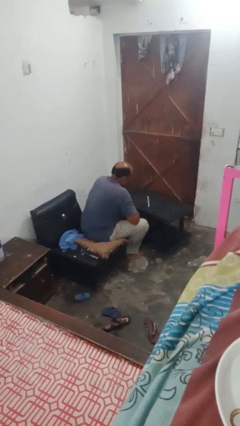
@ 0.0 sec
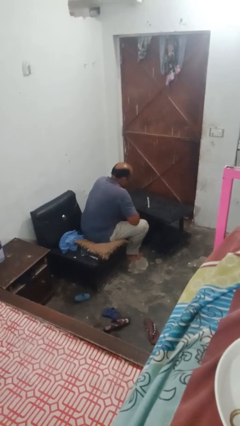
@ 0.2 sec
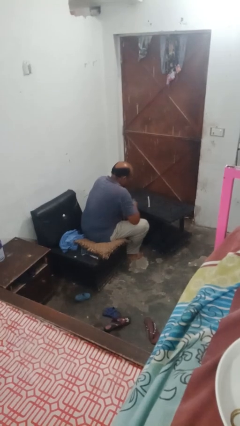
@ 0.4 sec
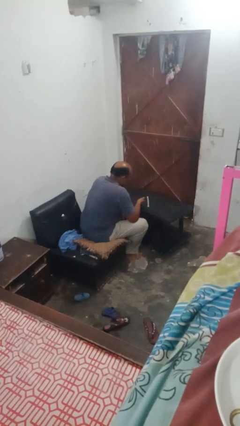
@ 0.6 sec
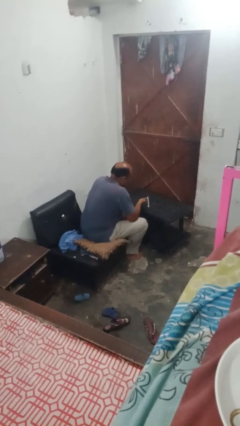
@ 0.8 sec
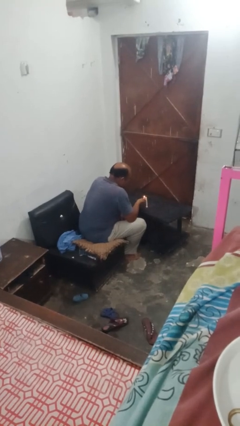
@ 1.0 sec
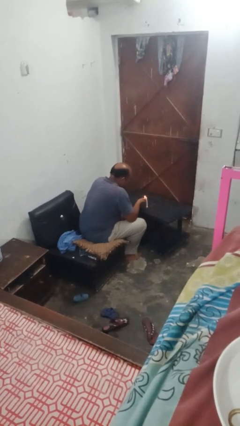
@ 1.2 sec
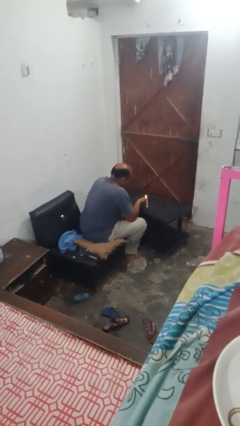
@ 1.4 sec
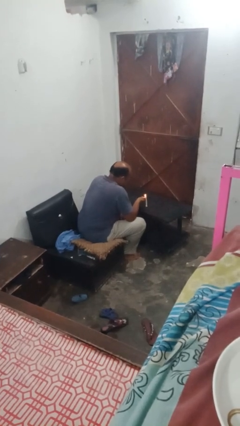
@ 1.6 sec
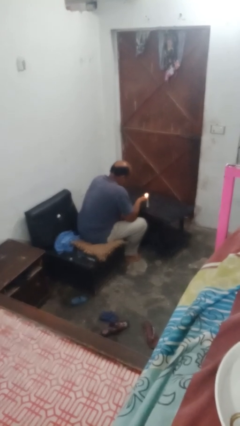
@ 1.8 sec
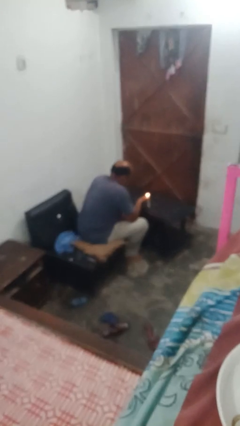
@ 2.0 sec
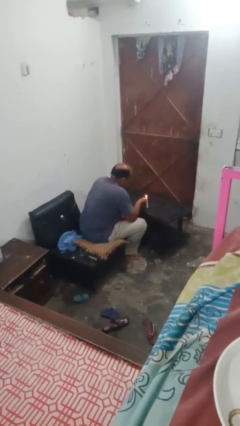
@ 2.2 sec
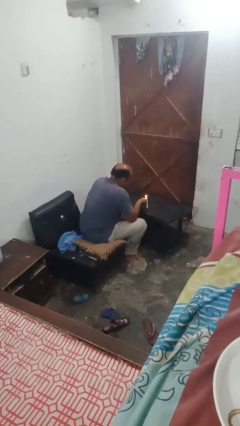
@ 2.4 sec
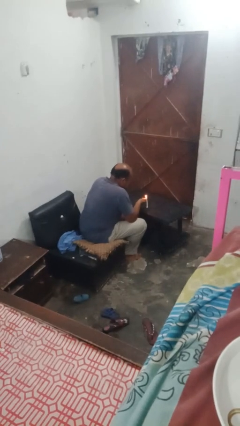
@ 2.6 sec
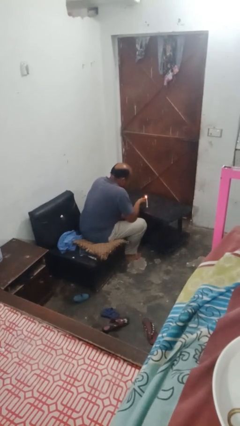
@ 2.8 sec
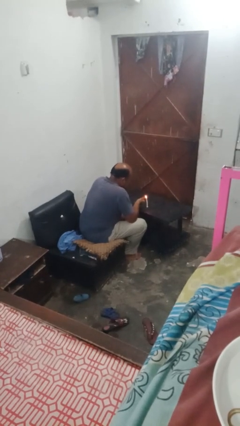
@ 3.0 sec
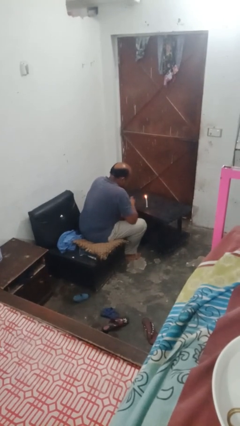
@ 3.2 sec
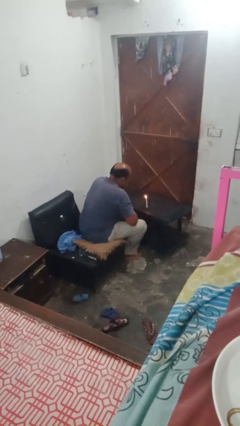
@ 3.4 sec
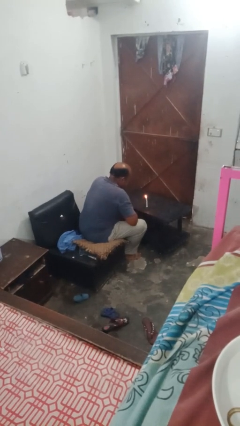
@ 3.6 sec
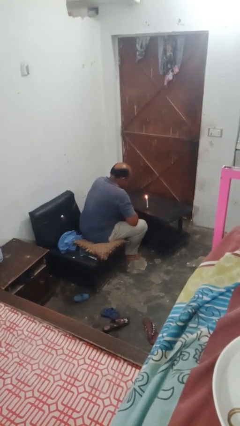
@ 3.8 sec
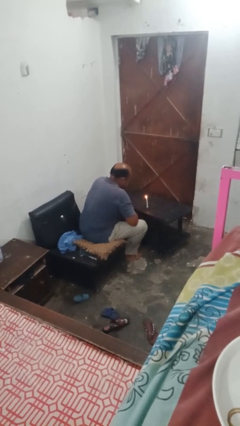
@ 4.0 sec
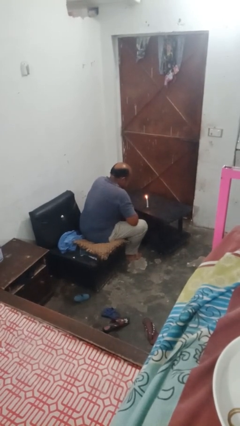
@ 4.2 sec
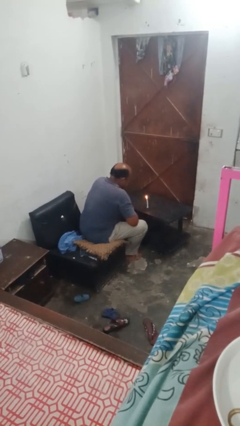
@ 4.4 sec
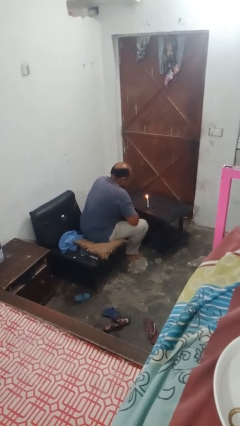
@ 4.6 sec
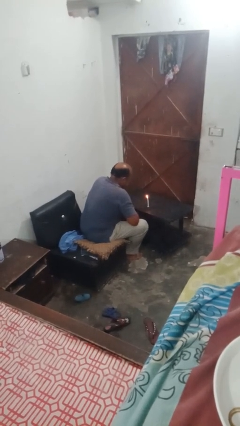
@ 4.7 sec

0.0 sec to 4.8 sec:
person lights candle

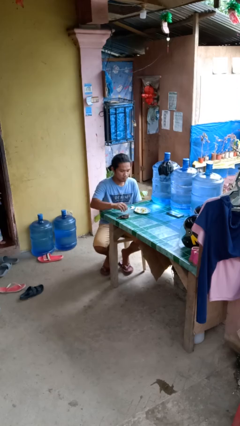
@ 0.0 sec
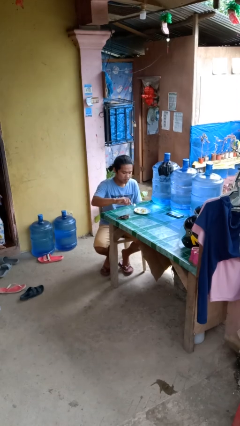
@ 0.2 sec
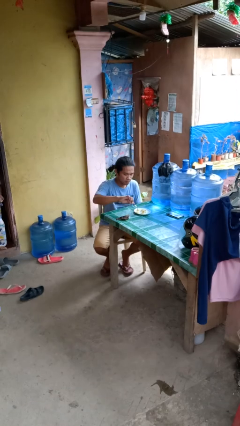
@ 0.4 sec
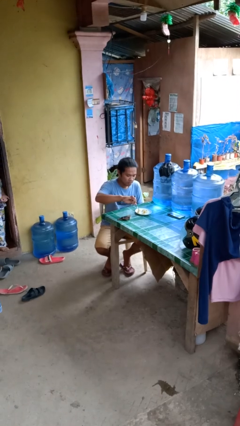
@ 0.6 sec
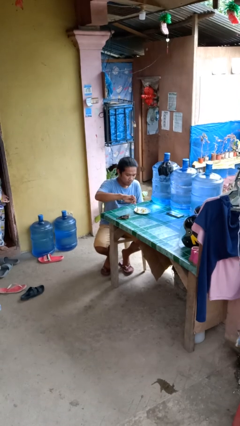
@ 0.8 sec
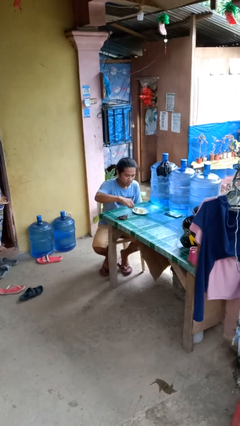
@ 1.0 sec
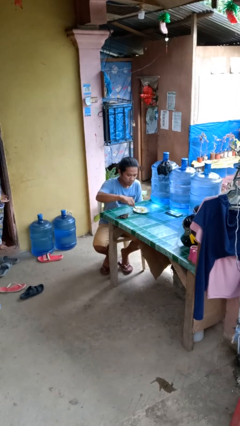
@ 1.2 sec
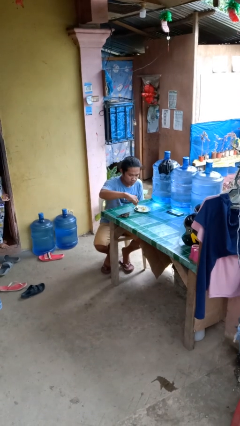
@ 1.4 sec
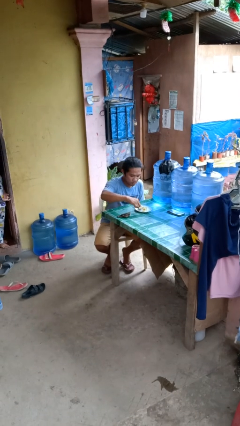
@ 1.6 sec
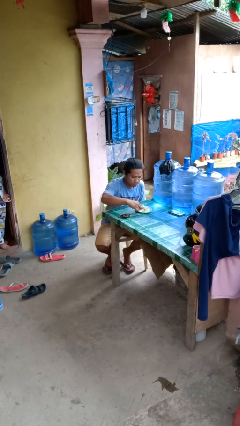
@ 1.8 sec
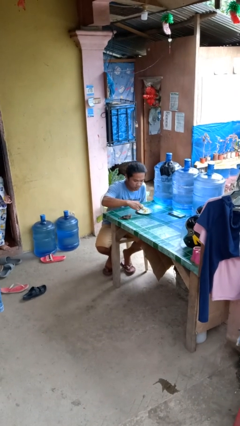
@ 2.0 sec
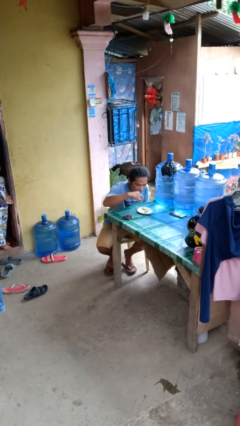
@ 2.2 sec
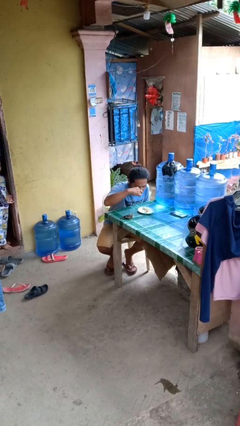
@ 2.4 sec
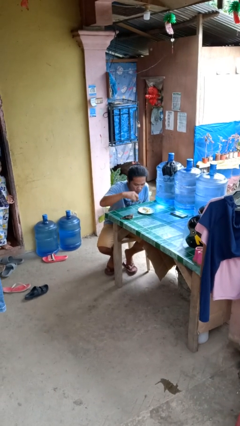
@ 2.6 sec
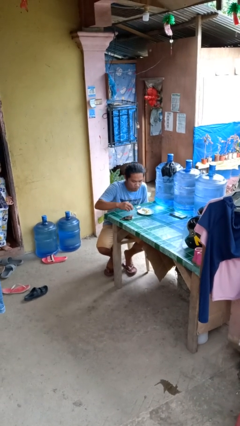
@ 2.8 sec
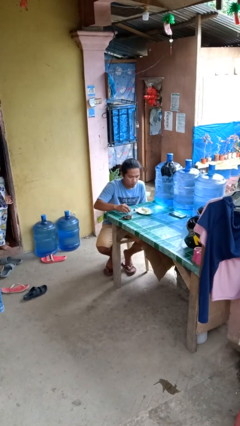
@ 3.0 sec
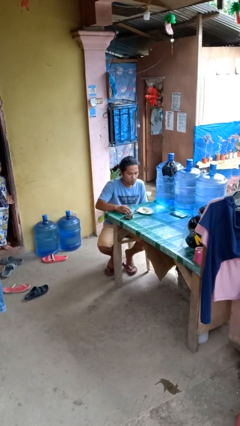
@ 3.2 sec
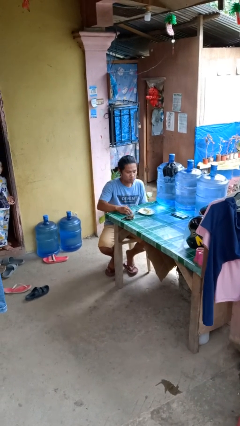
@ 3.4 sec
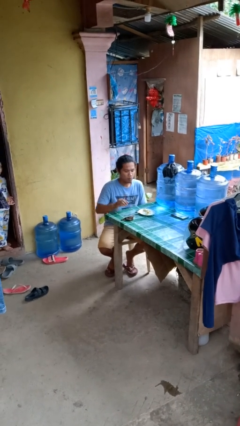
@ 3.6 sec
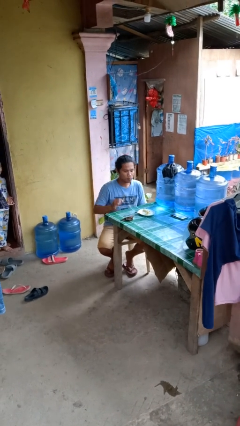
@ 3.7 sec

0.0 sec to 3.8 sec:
person eats with utensil

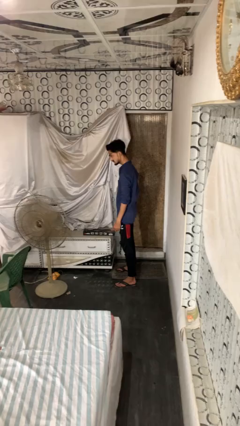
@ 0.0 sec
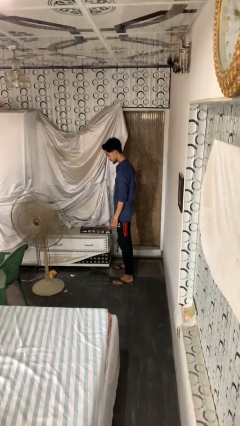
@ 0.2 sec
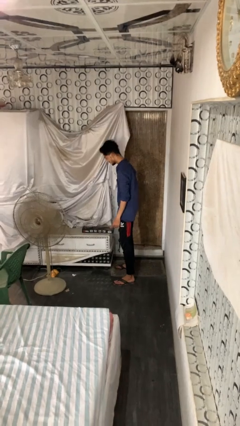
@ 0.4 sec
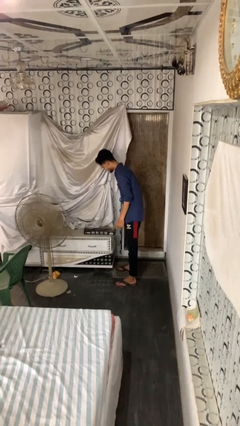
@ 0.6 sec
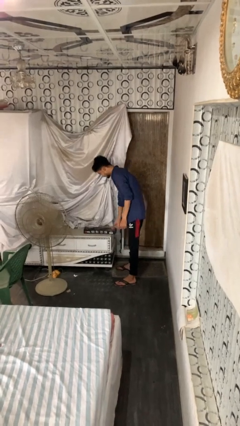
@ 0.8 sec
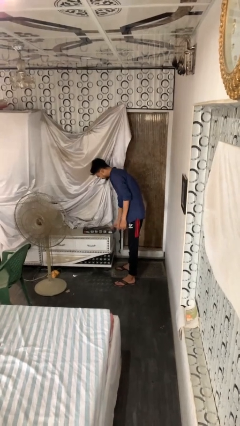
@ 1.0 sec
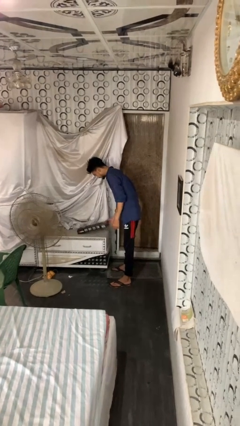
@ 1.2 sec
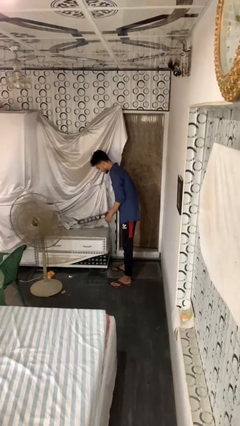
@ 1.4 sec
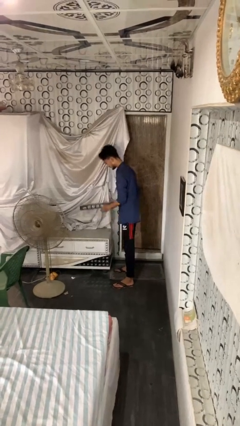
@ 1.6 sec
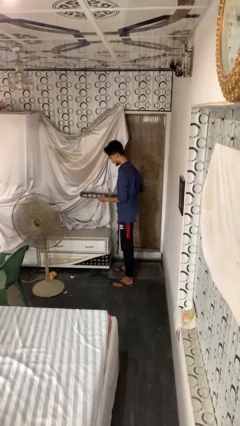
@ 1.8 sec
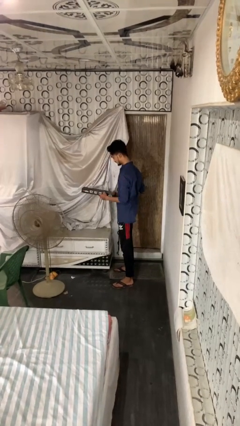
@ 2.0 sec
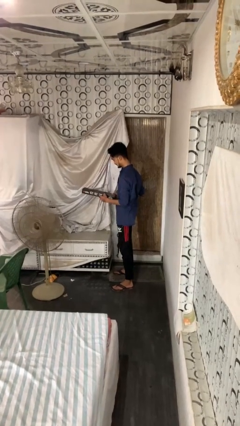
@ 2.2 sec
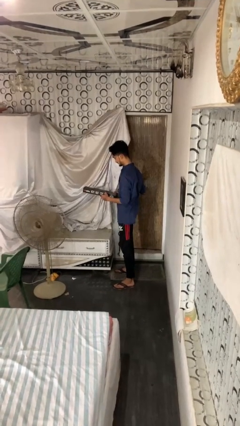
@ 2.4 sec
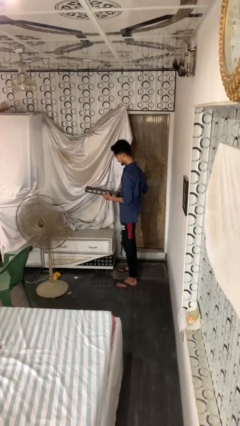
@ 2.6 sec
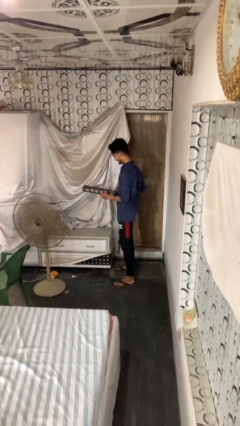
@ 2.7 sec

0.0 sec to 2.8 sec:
person picks up object from countertop

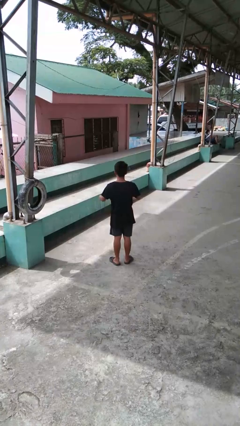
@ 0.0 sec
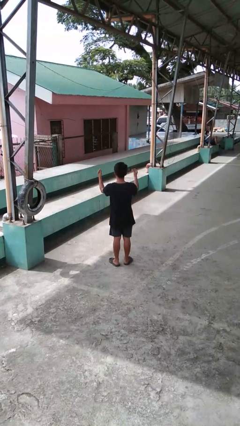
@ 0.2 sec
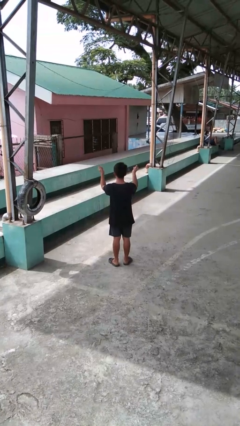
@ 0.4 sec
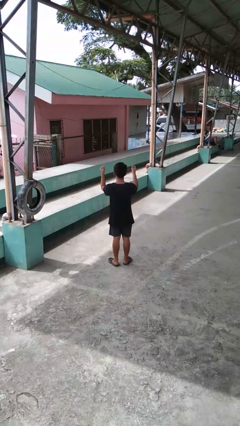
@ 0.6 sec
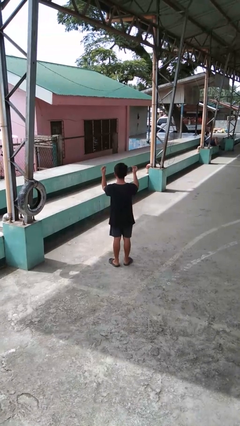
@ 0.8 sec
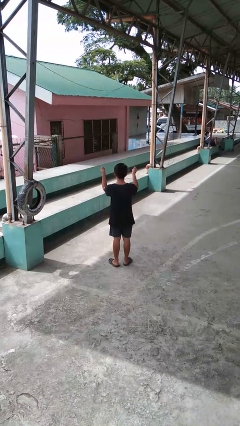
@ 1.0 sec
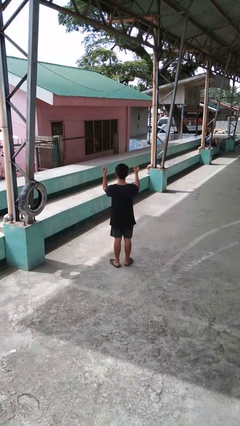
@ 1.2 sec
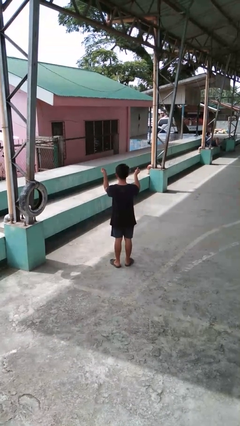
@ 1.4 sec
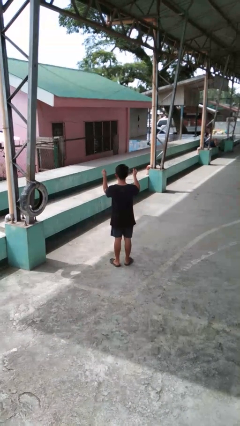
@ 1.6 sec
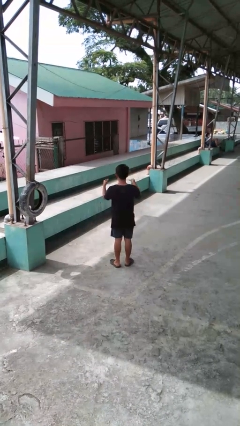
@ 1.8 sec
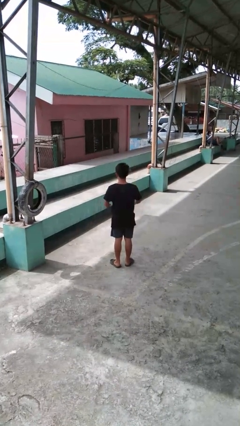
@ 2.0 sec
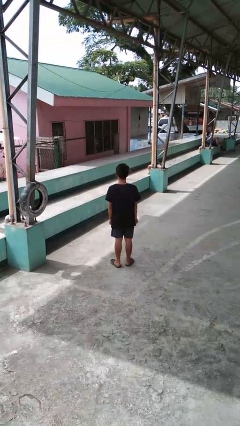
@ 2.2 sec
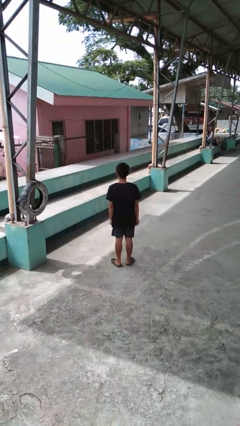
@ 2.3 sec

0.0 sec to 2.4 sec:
person snaps fingers

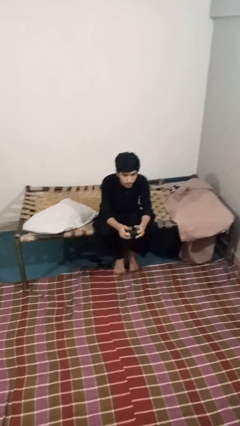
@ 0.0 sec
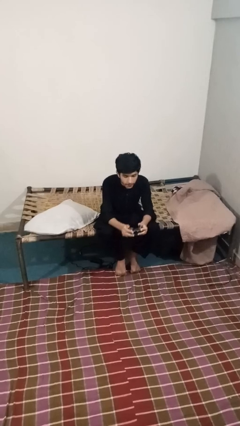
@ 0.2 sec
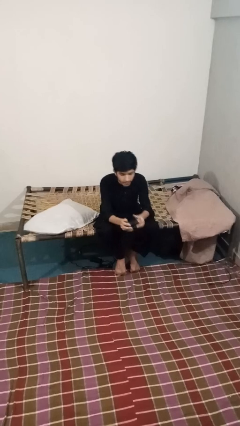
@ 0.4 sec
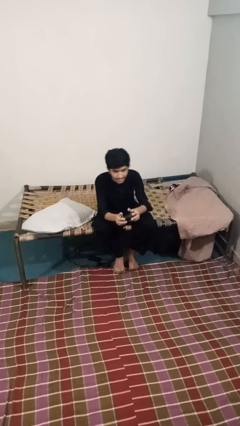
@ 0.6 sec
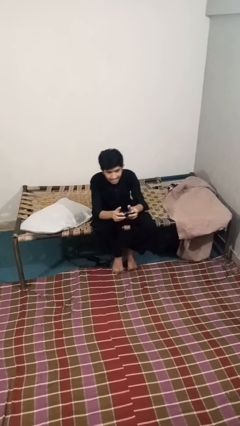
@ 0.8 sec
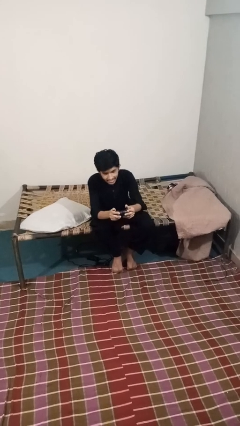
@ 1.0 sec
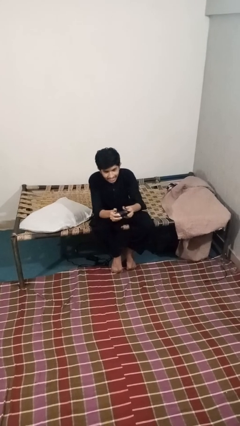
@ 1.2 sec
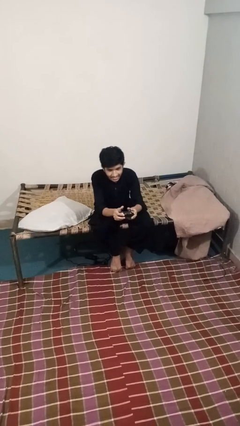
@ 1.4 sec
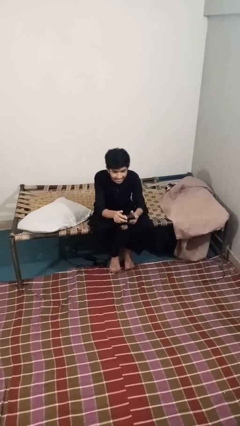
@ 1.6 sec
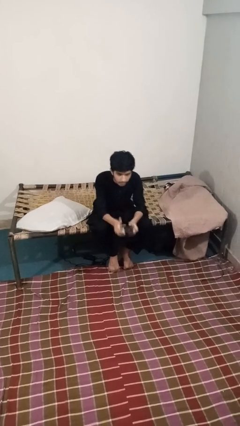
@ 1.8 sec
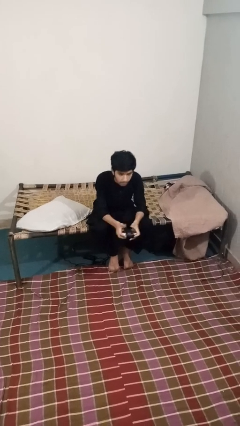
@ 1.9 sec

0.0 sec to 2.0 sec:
person interacts with handheld game

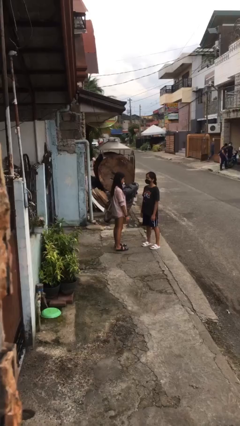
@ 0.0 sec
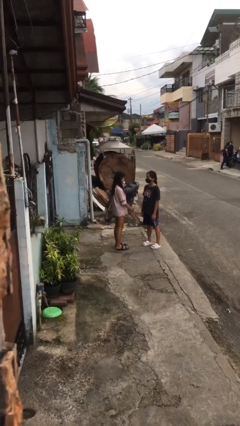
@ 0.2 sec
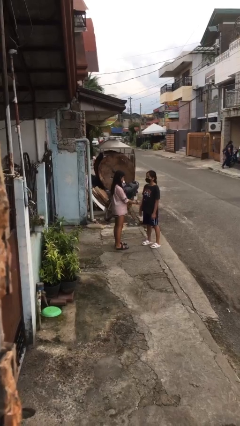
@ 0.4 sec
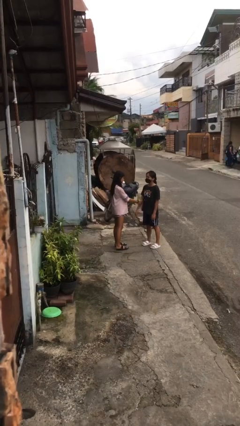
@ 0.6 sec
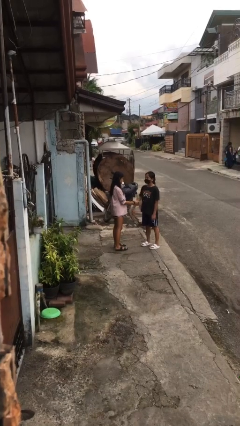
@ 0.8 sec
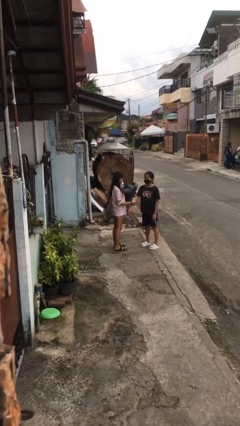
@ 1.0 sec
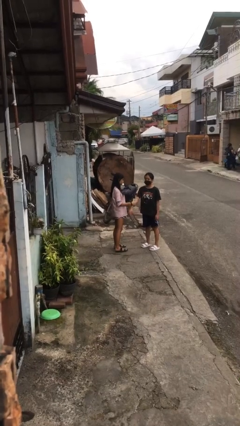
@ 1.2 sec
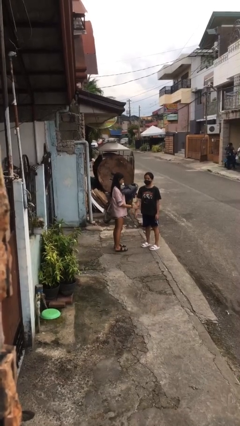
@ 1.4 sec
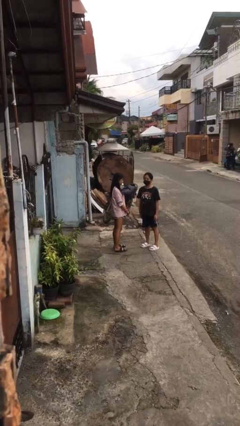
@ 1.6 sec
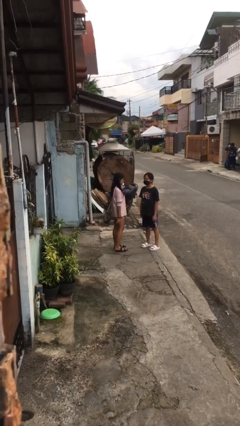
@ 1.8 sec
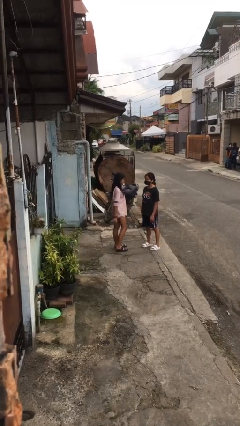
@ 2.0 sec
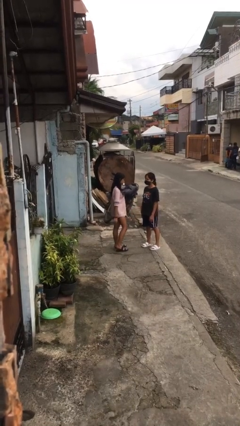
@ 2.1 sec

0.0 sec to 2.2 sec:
person grabs person by forearm
